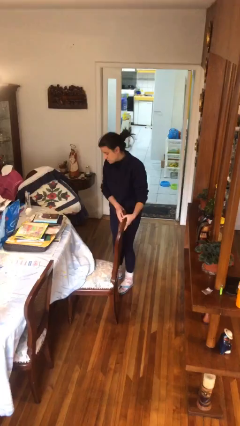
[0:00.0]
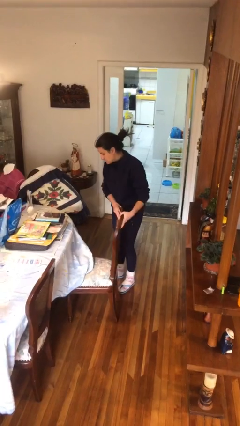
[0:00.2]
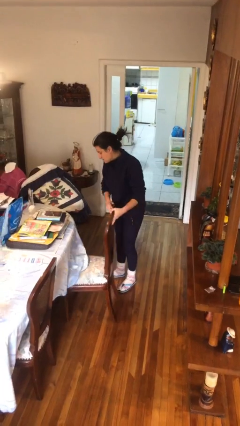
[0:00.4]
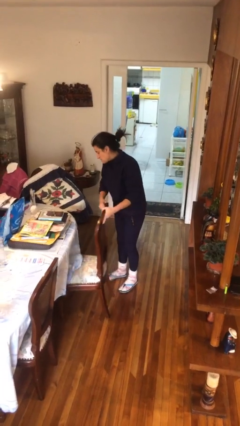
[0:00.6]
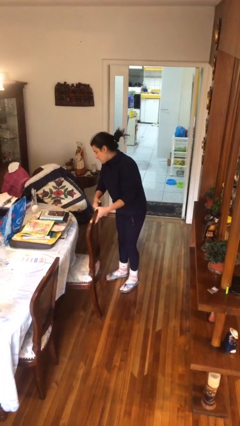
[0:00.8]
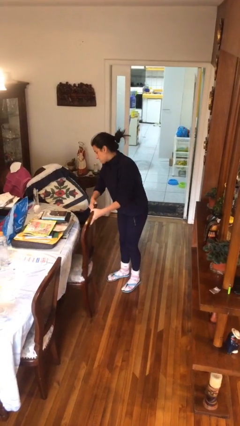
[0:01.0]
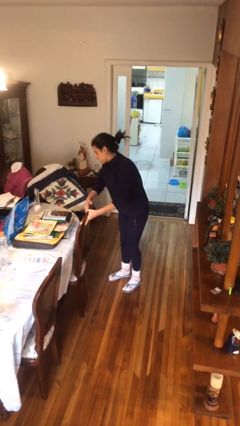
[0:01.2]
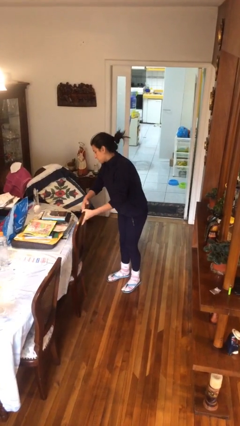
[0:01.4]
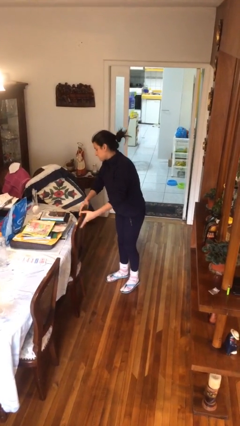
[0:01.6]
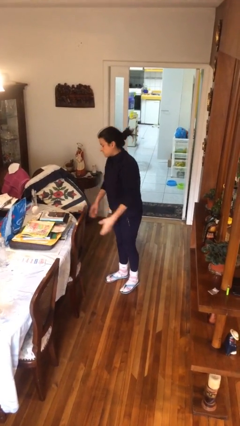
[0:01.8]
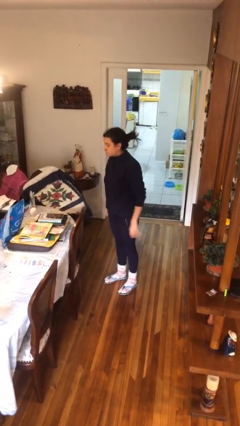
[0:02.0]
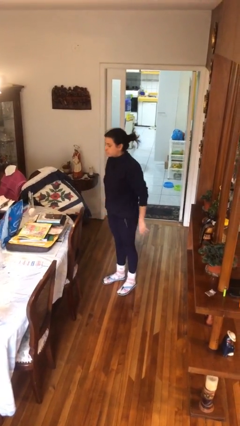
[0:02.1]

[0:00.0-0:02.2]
person pushes in chair

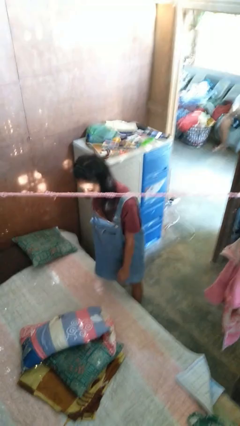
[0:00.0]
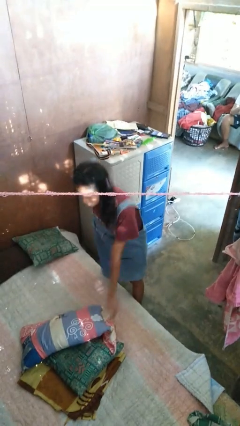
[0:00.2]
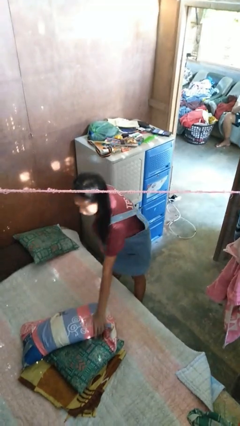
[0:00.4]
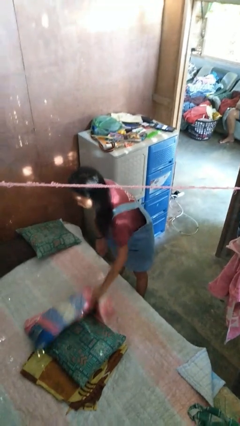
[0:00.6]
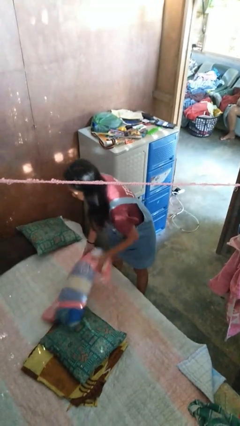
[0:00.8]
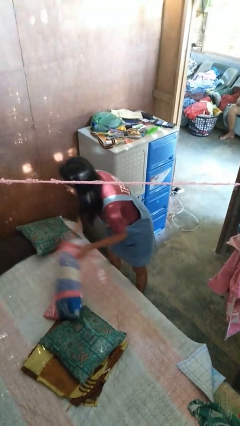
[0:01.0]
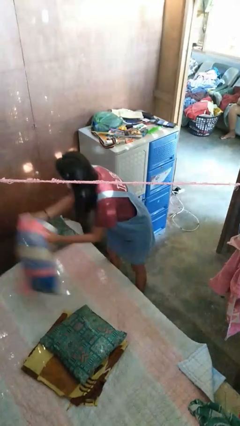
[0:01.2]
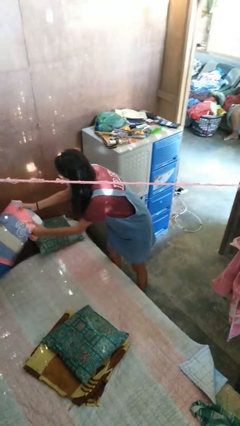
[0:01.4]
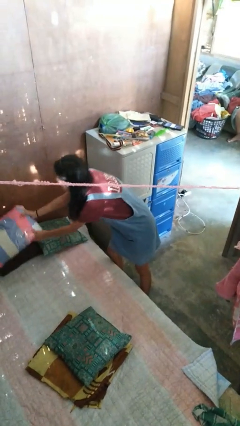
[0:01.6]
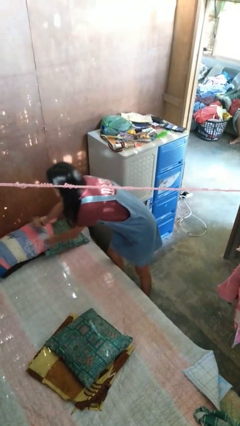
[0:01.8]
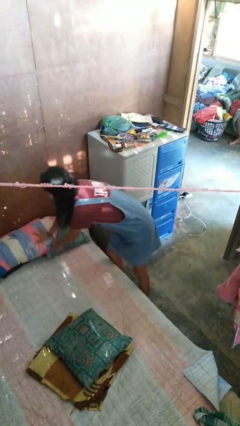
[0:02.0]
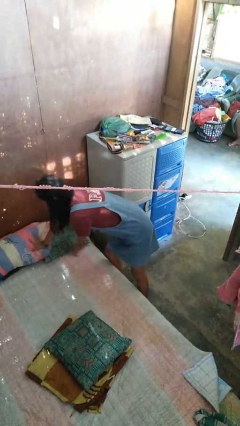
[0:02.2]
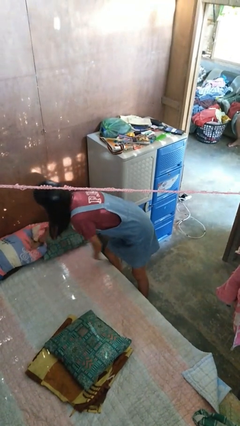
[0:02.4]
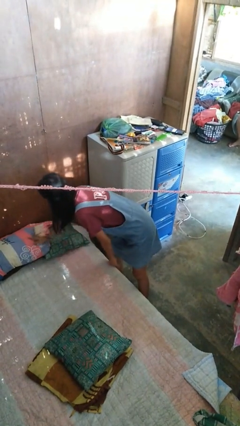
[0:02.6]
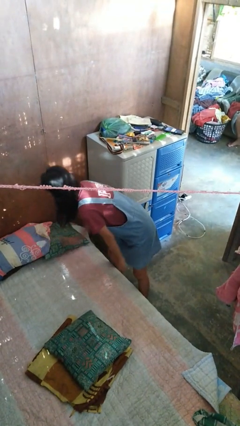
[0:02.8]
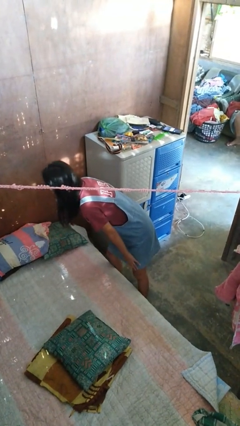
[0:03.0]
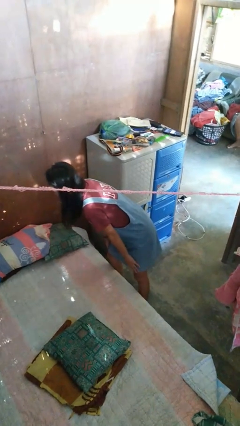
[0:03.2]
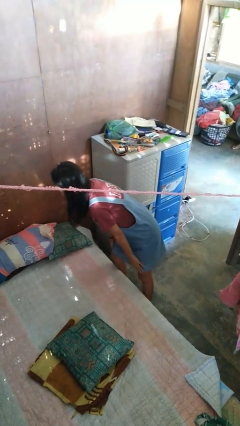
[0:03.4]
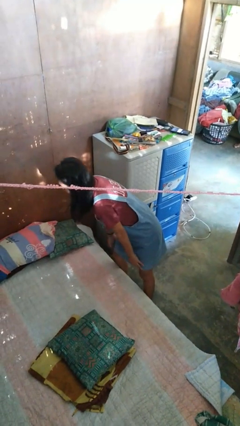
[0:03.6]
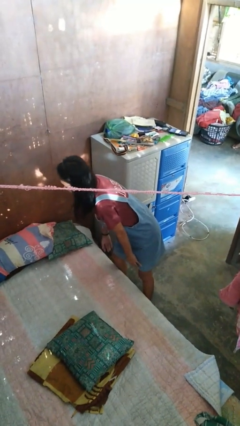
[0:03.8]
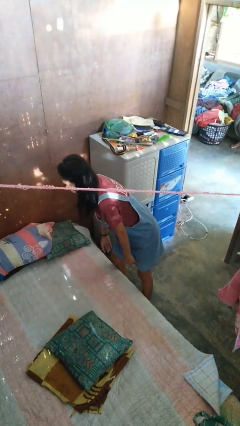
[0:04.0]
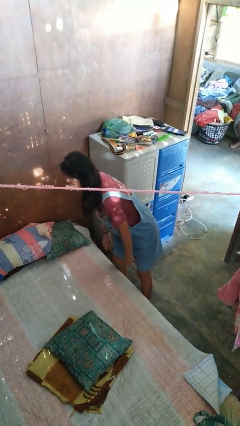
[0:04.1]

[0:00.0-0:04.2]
person makes bed

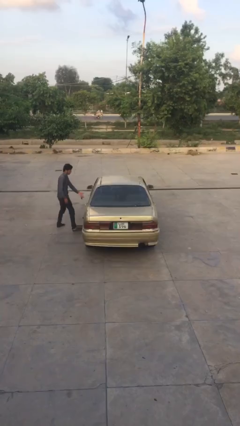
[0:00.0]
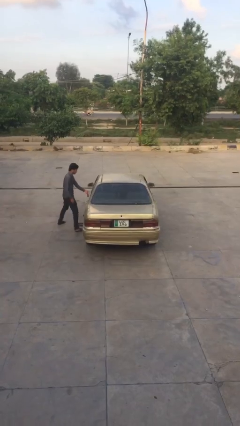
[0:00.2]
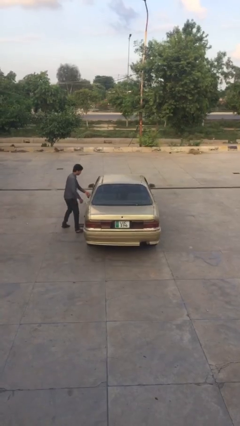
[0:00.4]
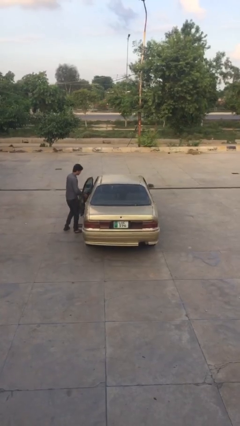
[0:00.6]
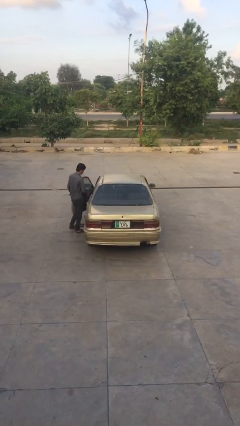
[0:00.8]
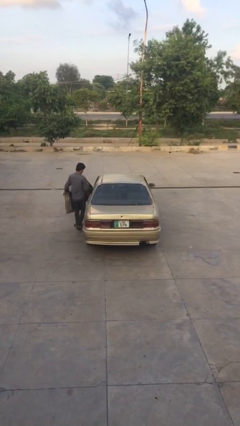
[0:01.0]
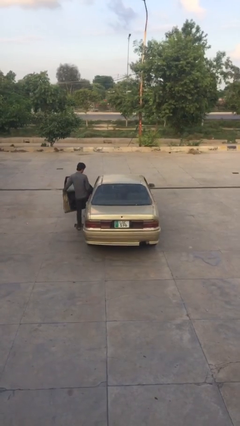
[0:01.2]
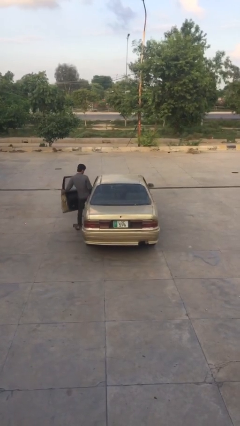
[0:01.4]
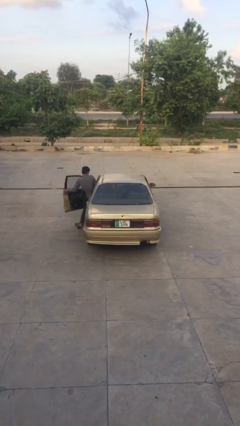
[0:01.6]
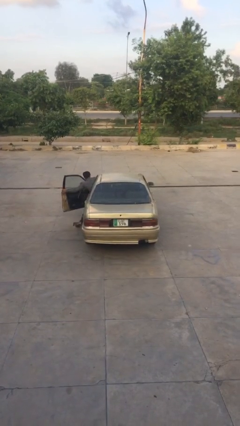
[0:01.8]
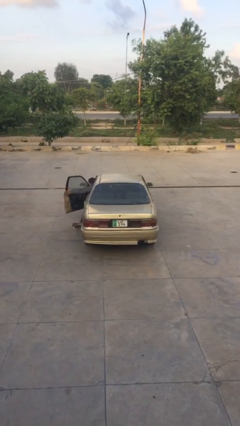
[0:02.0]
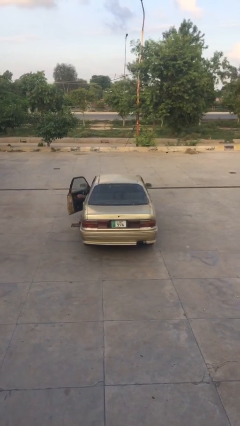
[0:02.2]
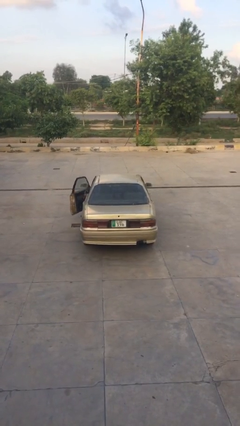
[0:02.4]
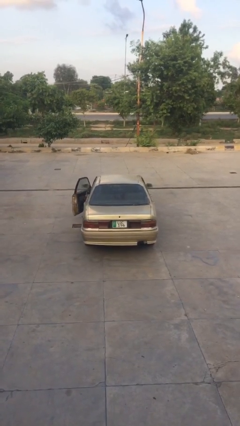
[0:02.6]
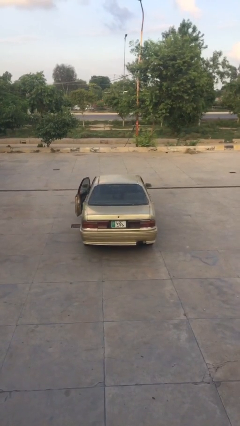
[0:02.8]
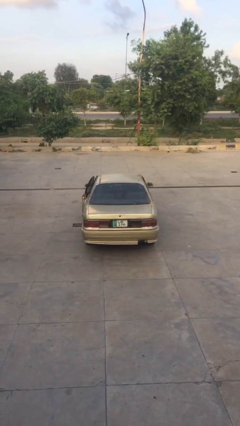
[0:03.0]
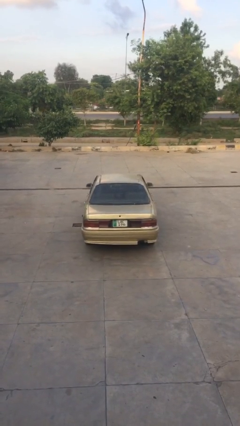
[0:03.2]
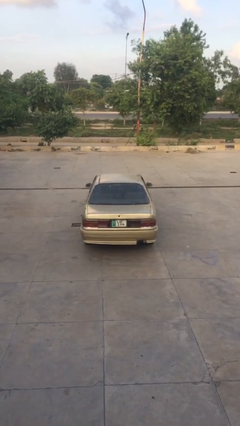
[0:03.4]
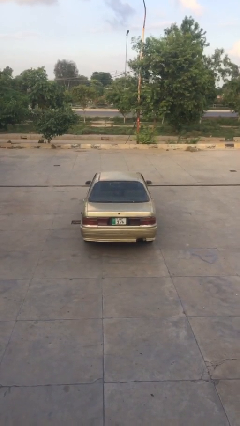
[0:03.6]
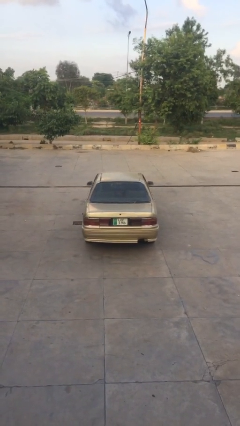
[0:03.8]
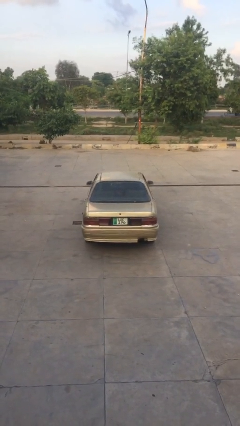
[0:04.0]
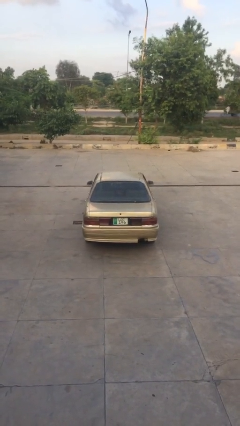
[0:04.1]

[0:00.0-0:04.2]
car picks up person

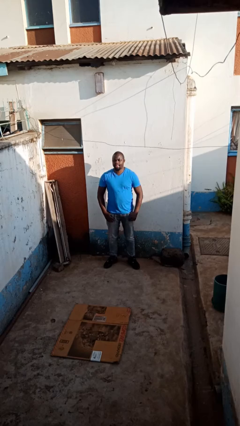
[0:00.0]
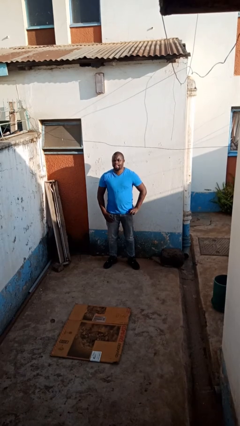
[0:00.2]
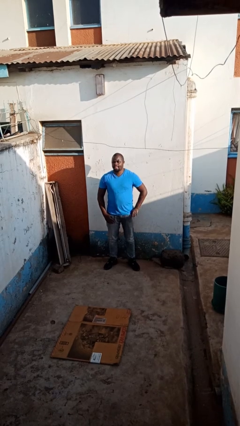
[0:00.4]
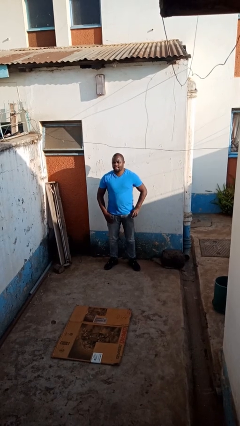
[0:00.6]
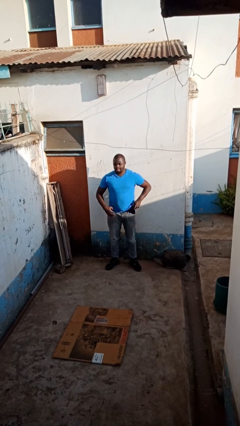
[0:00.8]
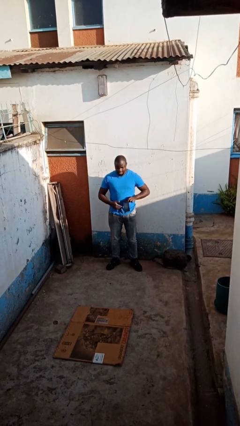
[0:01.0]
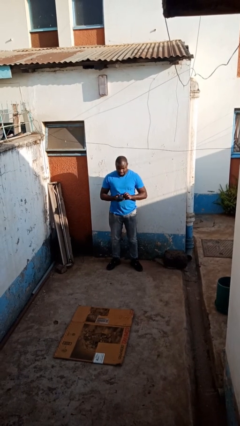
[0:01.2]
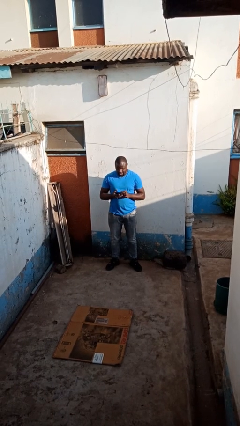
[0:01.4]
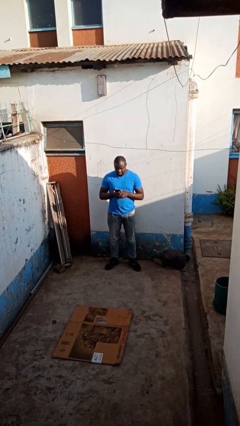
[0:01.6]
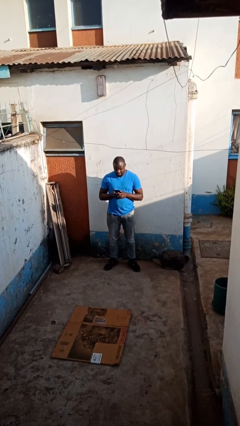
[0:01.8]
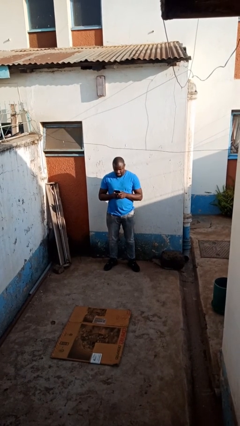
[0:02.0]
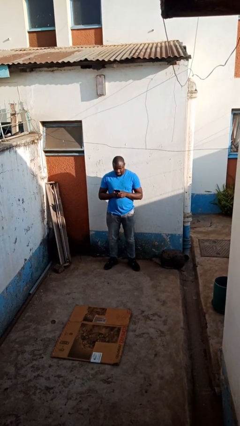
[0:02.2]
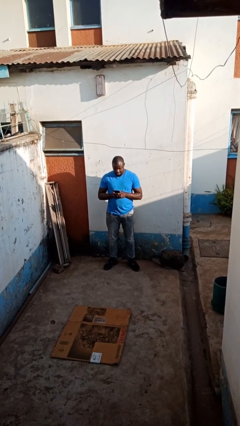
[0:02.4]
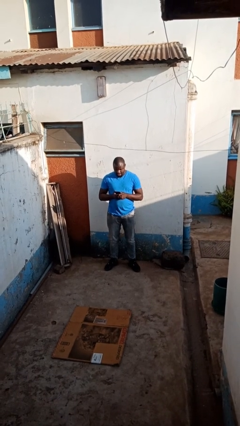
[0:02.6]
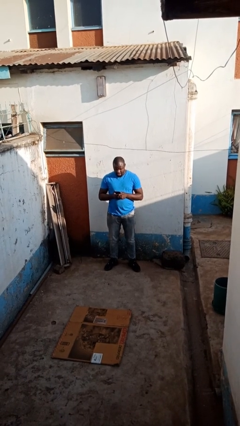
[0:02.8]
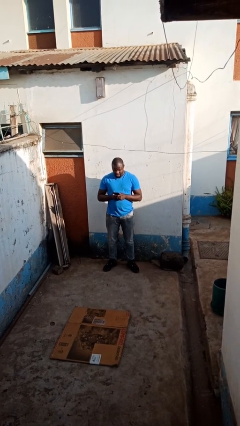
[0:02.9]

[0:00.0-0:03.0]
person takes phone from pocket

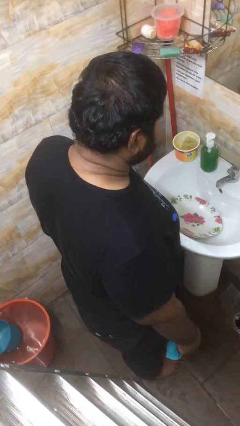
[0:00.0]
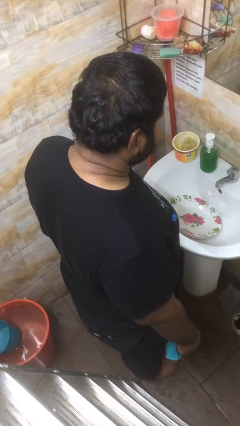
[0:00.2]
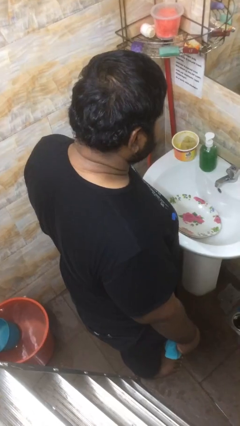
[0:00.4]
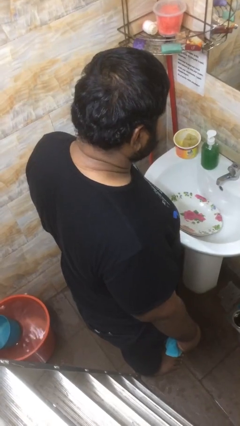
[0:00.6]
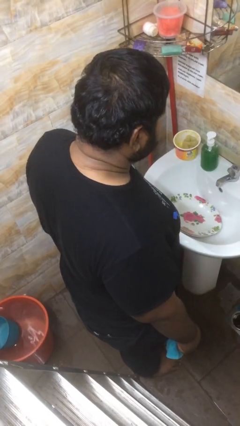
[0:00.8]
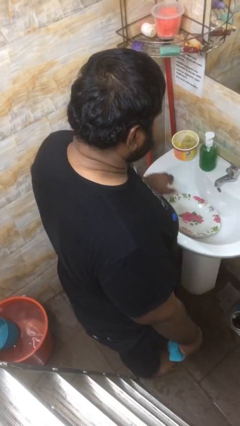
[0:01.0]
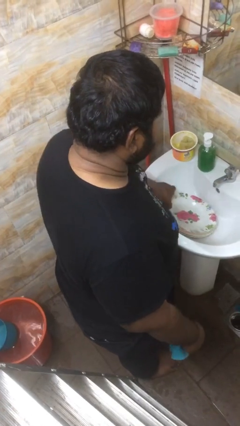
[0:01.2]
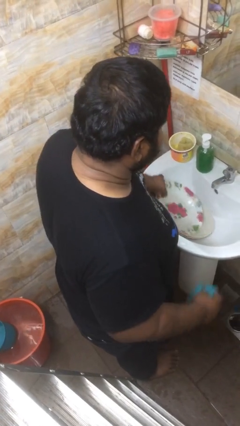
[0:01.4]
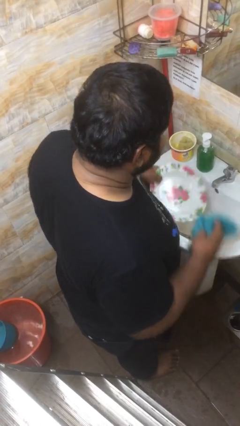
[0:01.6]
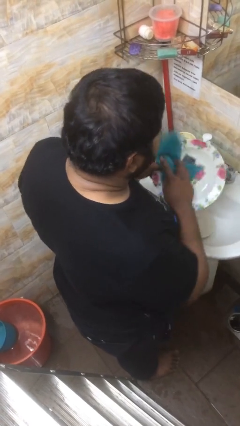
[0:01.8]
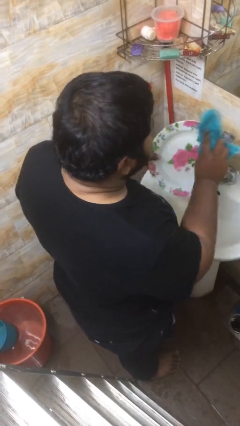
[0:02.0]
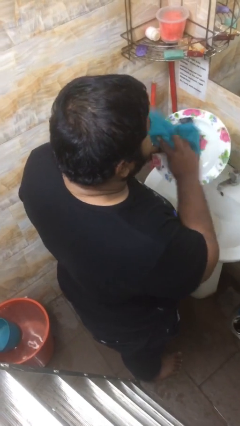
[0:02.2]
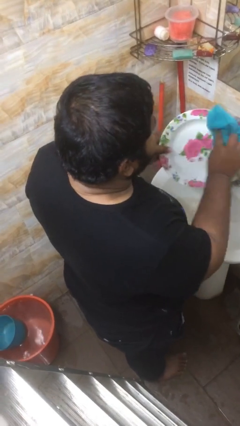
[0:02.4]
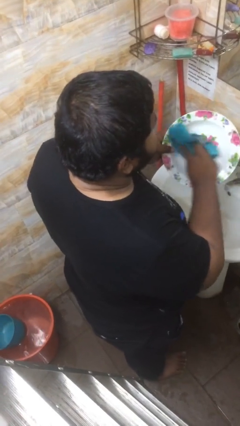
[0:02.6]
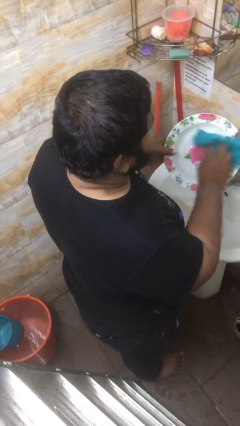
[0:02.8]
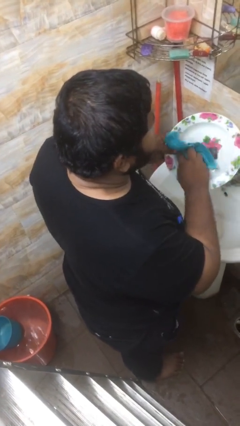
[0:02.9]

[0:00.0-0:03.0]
person dries dish

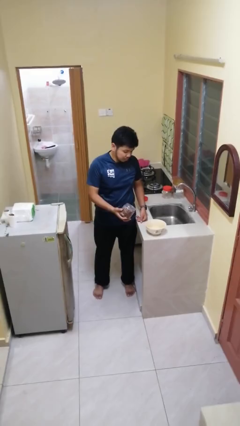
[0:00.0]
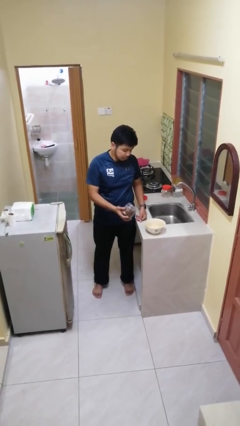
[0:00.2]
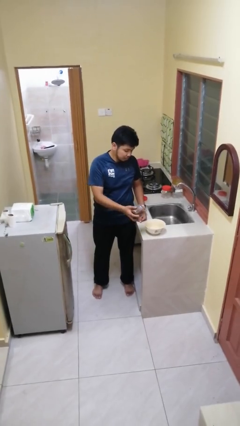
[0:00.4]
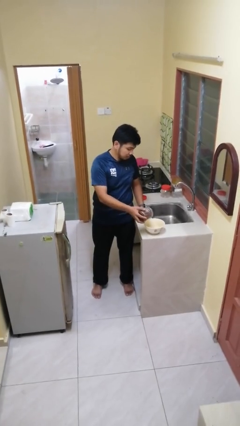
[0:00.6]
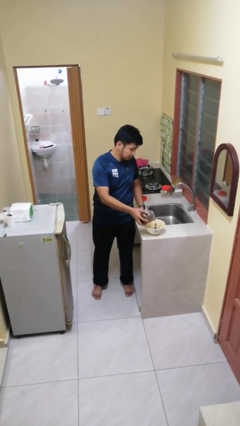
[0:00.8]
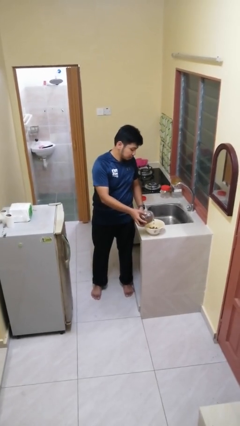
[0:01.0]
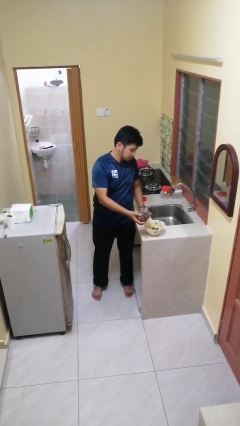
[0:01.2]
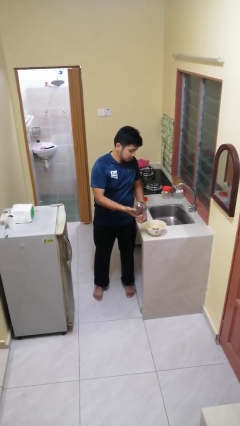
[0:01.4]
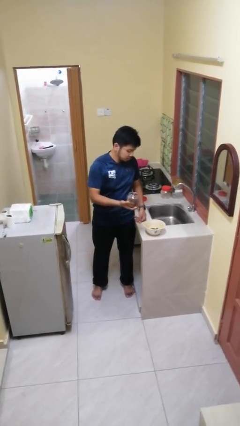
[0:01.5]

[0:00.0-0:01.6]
person pours into bowl
